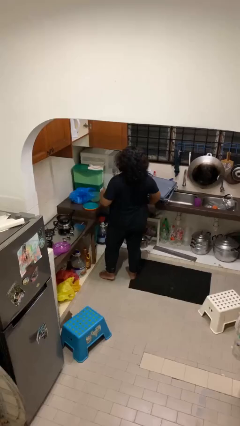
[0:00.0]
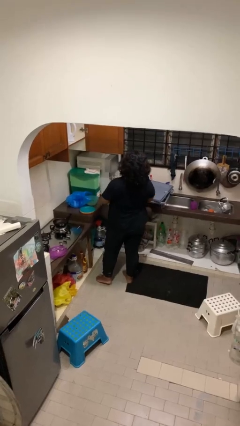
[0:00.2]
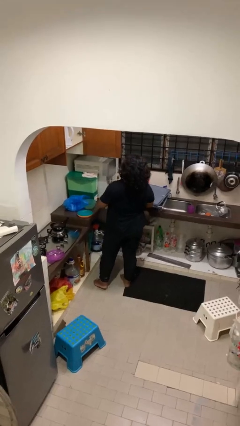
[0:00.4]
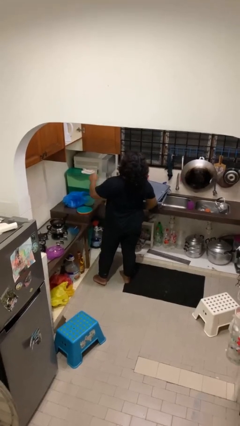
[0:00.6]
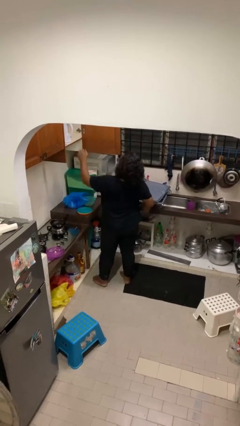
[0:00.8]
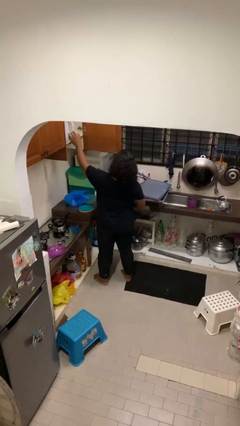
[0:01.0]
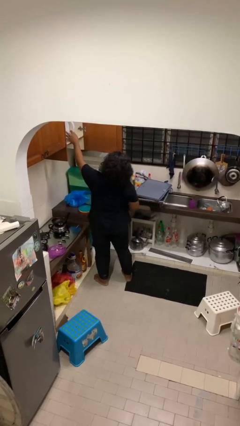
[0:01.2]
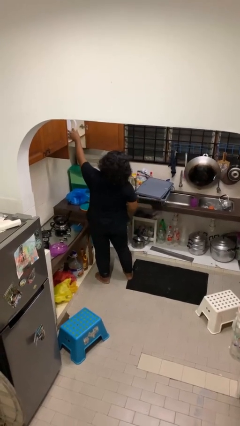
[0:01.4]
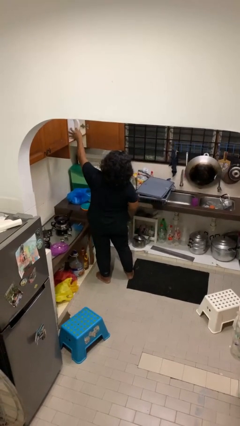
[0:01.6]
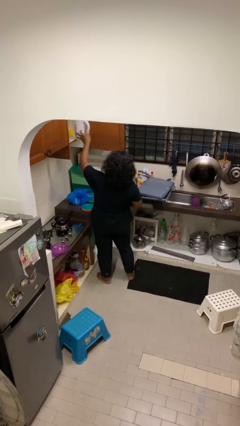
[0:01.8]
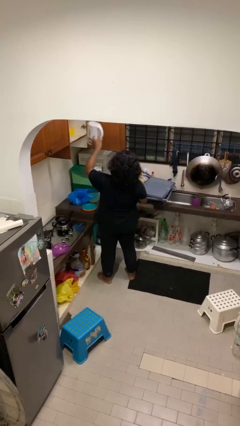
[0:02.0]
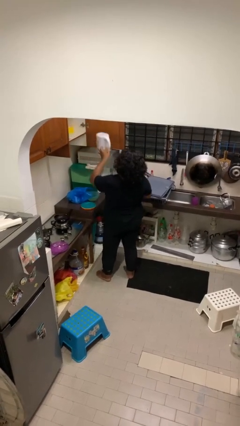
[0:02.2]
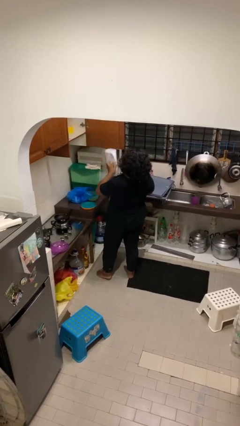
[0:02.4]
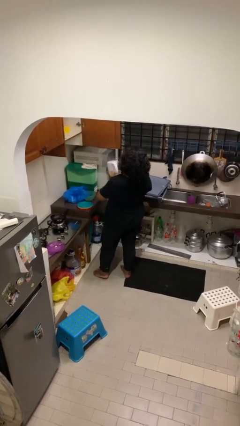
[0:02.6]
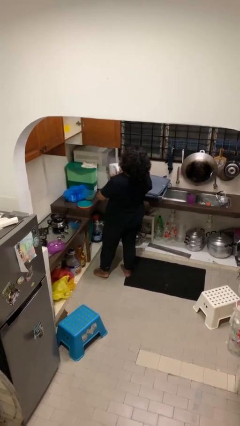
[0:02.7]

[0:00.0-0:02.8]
person takes object from cabinet

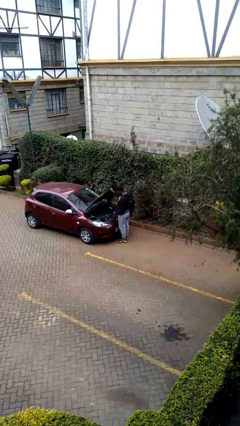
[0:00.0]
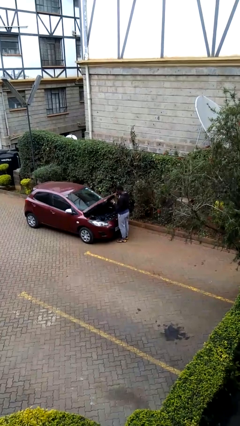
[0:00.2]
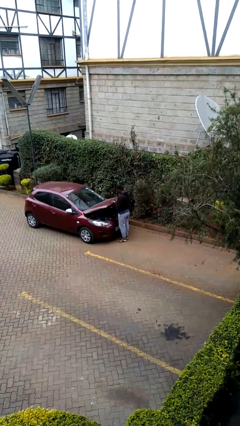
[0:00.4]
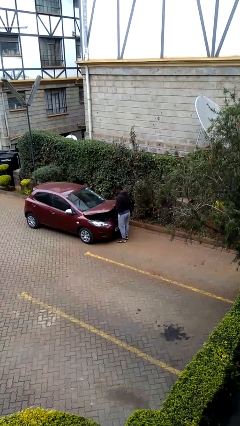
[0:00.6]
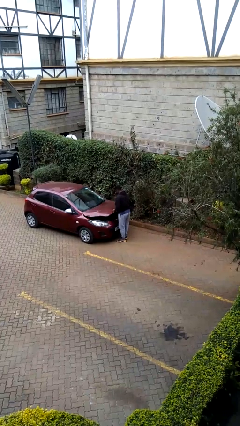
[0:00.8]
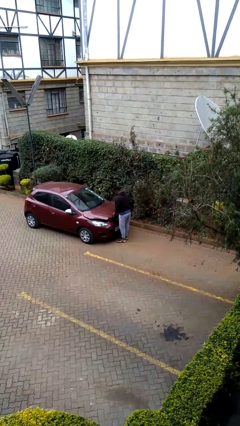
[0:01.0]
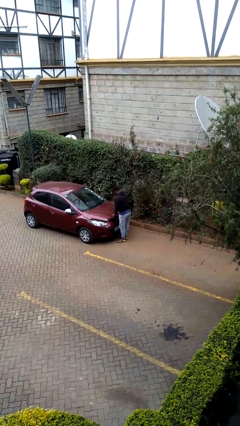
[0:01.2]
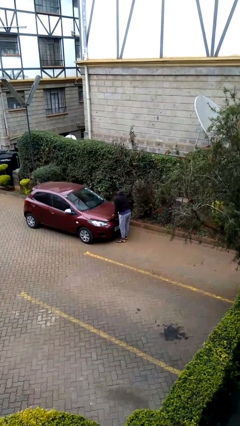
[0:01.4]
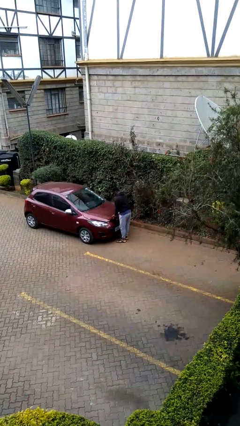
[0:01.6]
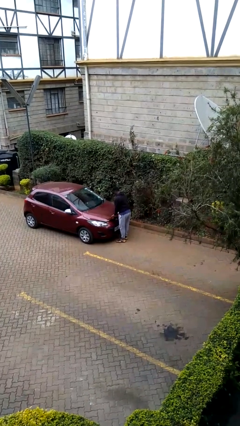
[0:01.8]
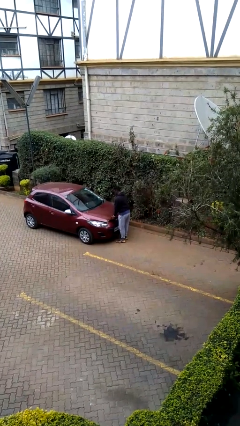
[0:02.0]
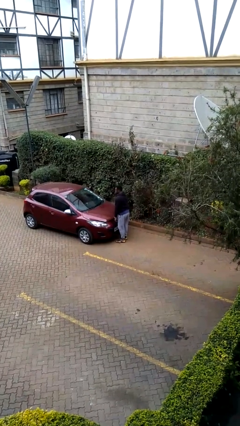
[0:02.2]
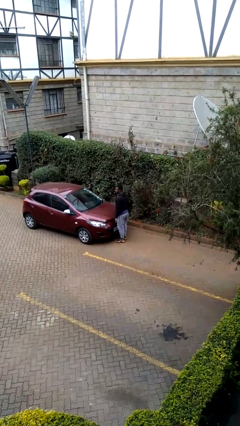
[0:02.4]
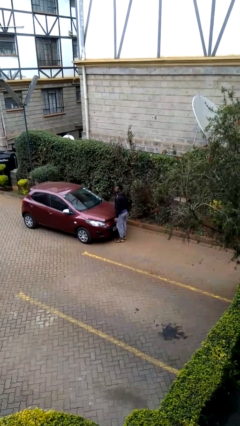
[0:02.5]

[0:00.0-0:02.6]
person closes car hood

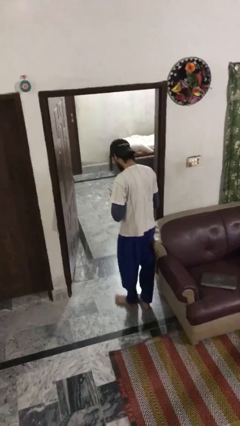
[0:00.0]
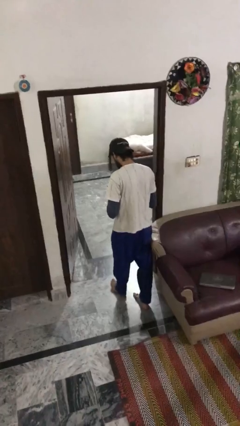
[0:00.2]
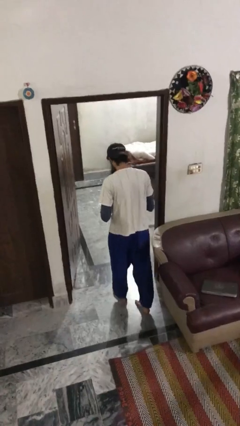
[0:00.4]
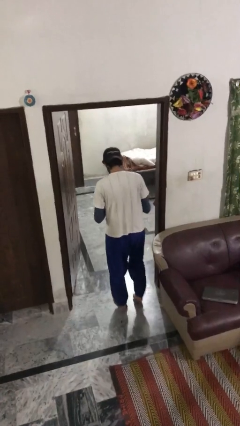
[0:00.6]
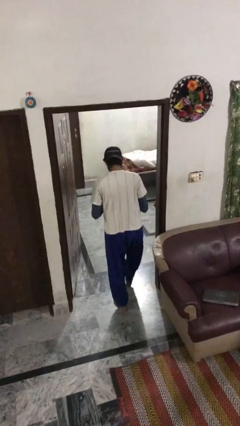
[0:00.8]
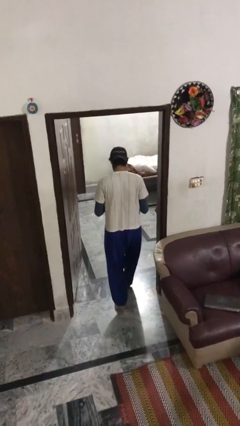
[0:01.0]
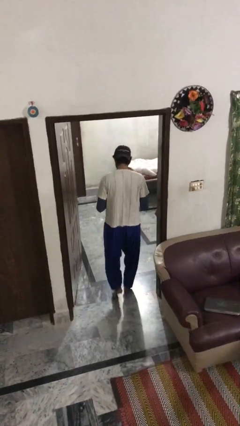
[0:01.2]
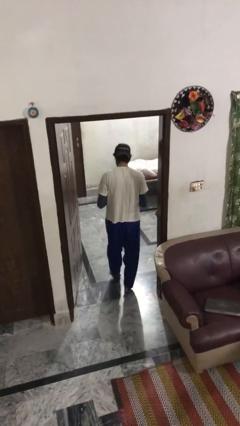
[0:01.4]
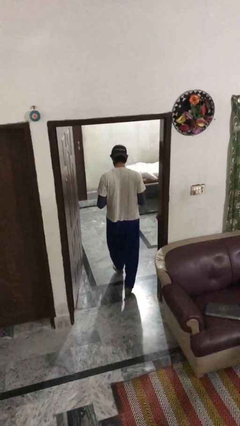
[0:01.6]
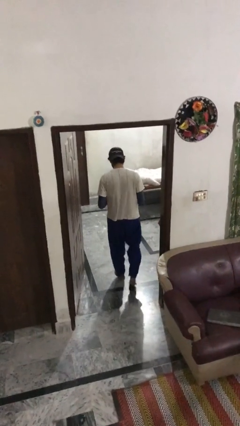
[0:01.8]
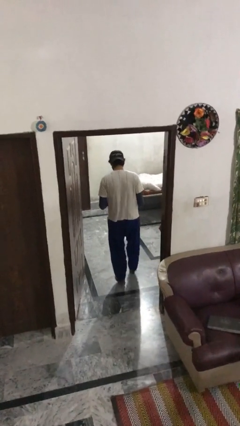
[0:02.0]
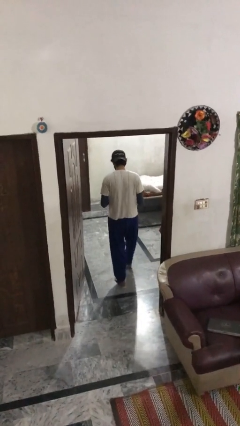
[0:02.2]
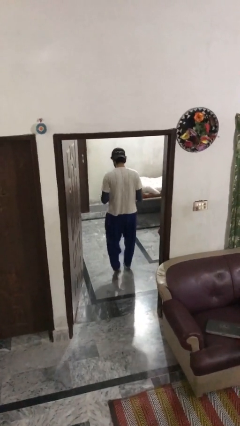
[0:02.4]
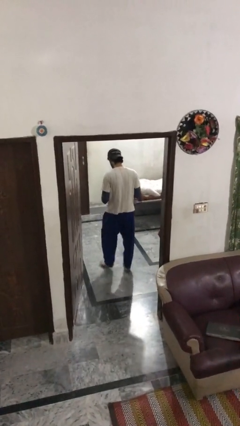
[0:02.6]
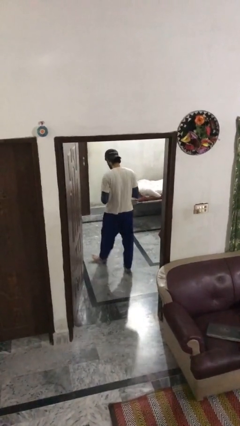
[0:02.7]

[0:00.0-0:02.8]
person exits scene through structure

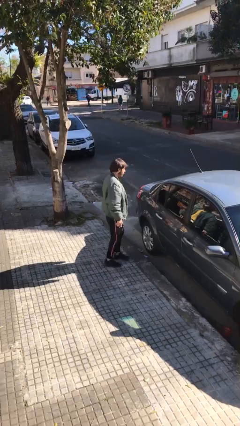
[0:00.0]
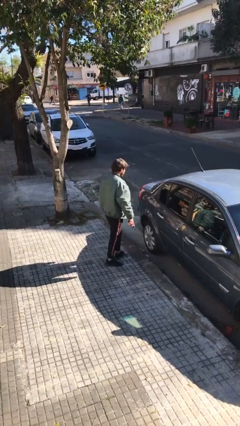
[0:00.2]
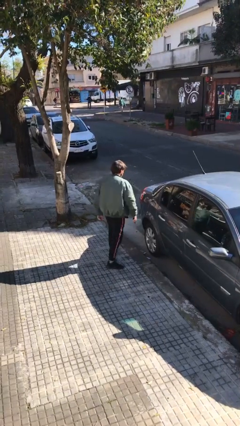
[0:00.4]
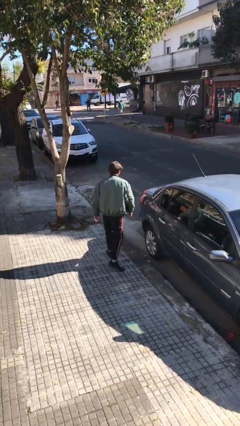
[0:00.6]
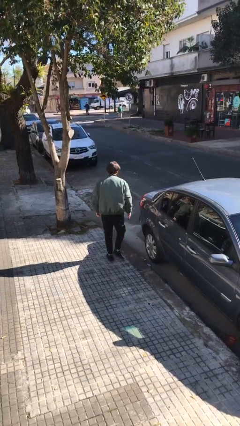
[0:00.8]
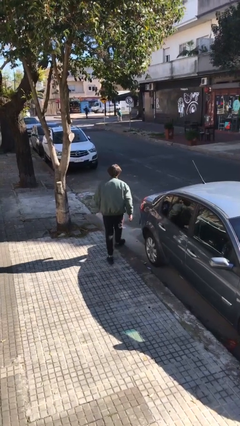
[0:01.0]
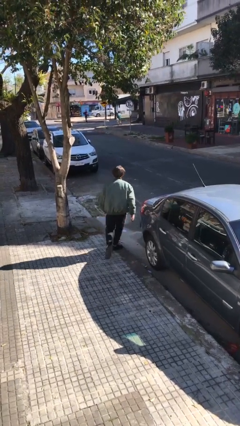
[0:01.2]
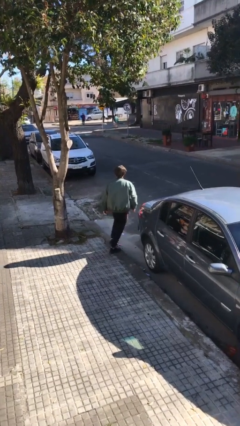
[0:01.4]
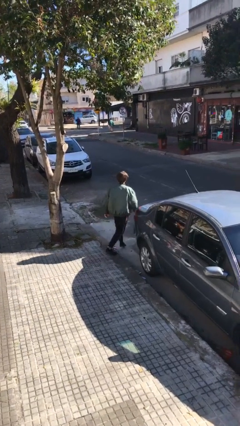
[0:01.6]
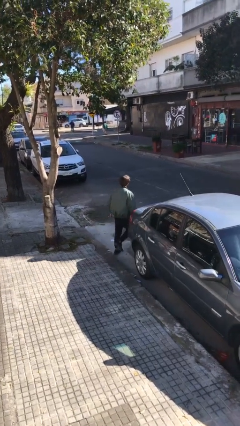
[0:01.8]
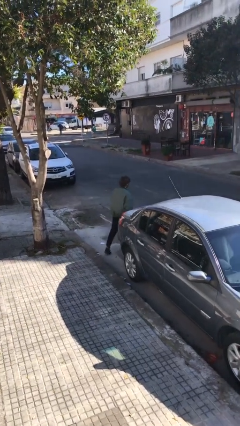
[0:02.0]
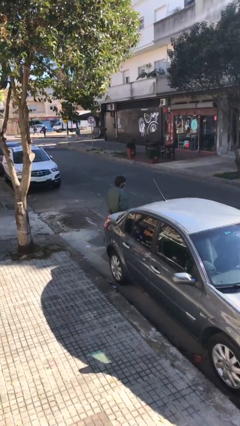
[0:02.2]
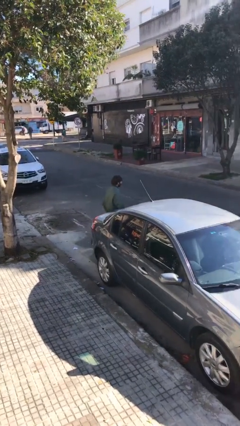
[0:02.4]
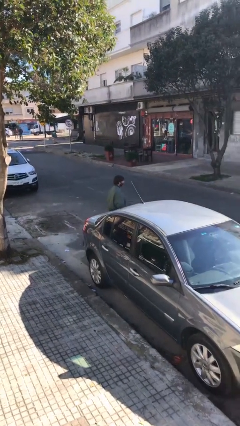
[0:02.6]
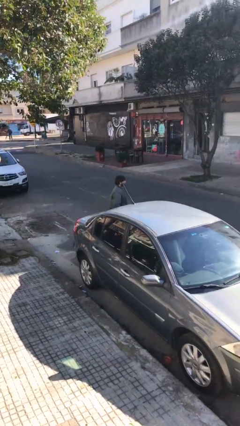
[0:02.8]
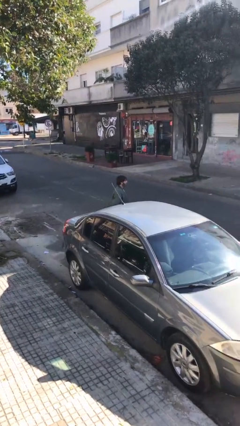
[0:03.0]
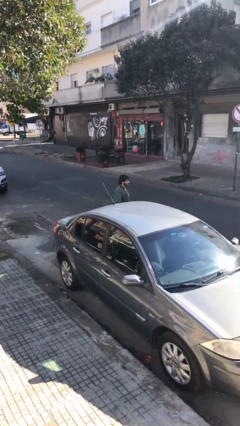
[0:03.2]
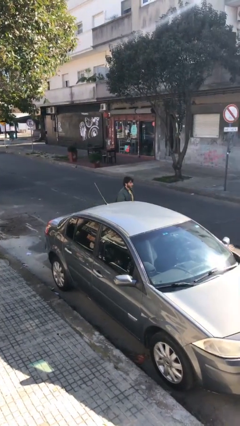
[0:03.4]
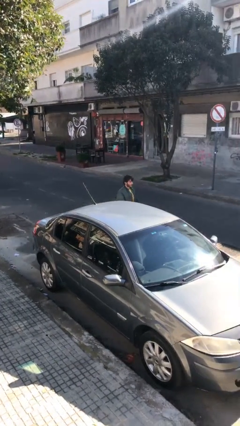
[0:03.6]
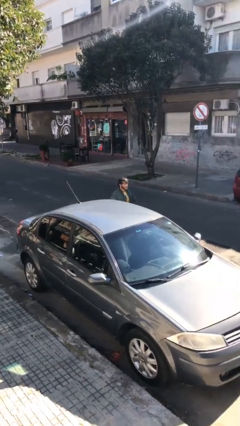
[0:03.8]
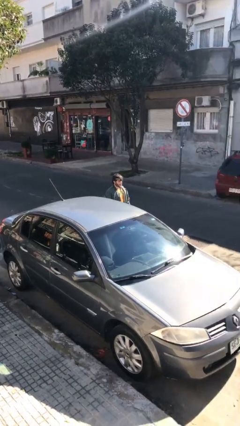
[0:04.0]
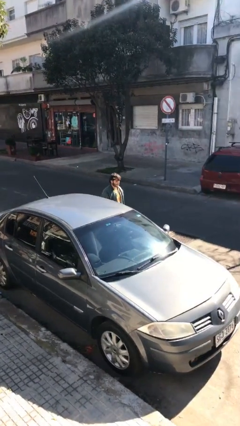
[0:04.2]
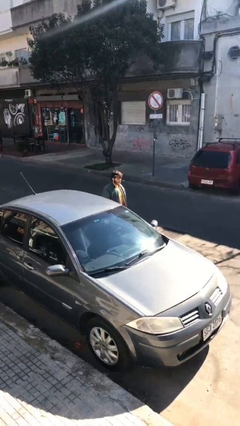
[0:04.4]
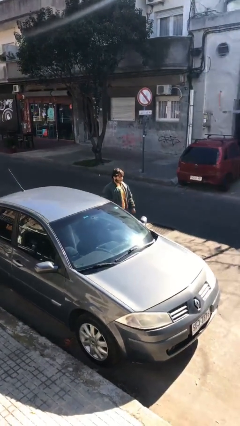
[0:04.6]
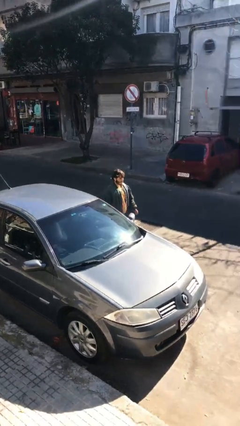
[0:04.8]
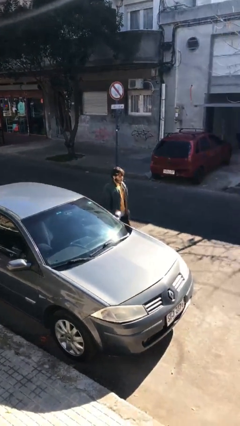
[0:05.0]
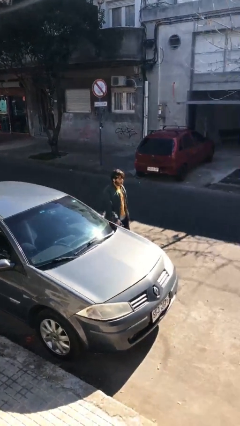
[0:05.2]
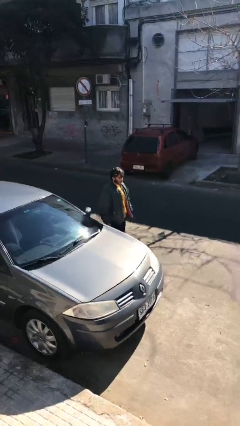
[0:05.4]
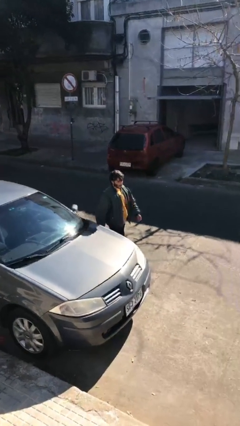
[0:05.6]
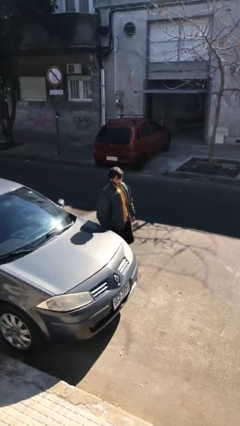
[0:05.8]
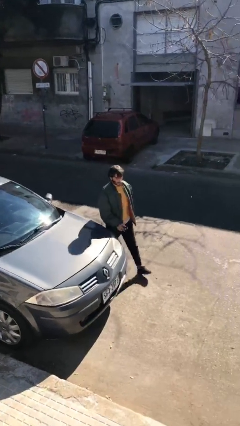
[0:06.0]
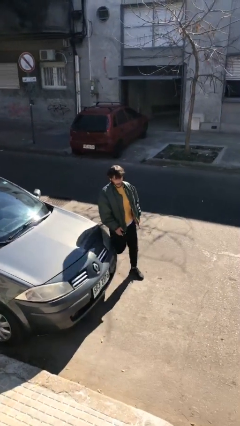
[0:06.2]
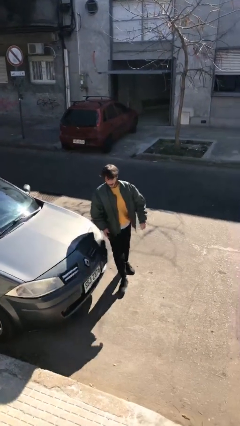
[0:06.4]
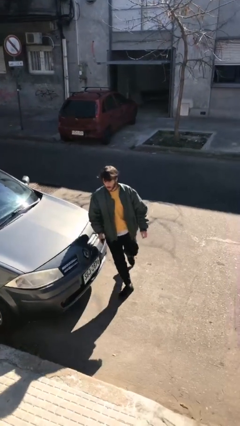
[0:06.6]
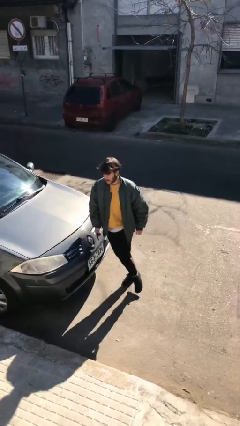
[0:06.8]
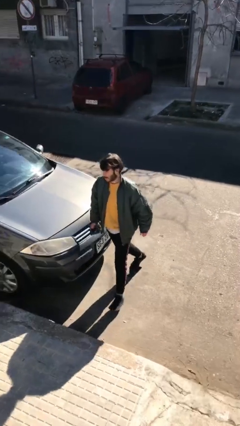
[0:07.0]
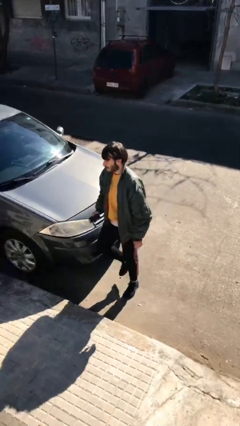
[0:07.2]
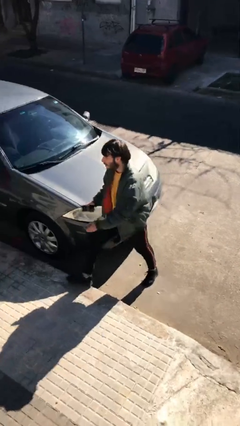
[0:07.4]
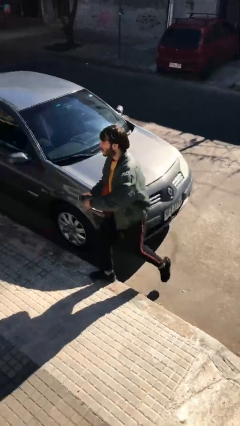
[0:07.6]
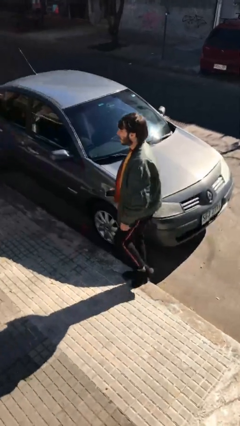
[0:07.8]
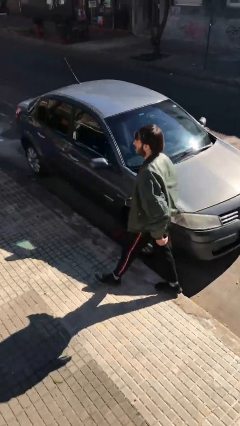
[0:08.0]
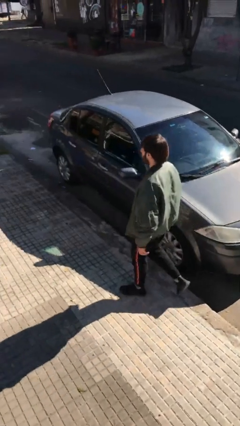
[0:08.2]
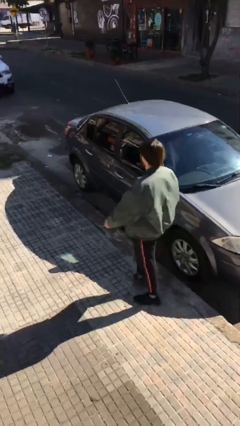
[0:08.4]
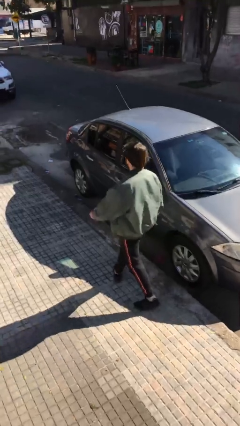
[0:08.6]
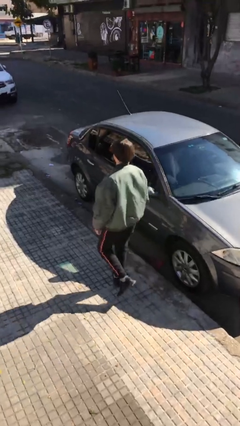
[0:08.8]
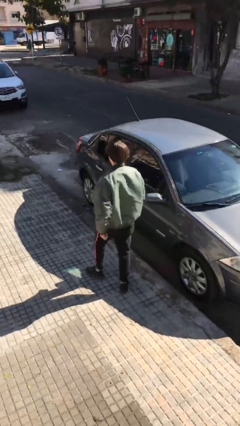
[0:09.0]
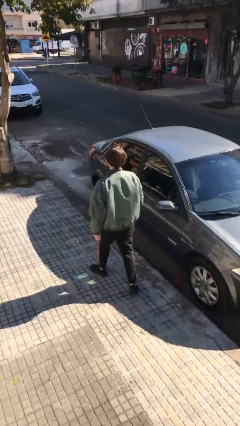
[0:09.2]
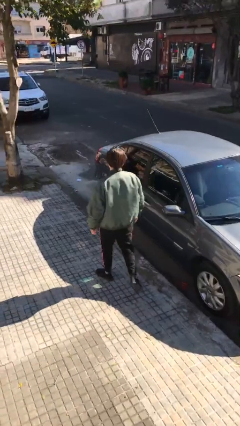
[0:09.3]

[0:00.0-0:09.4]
person walks around car

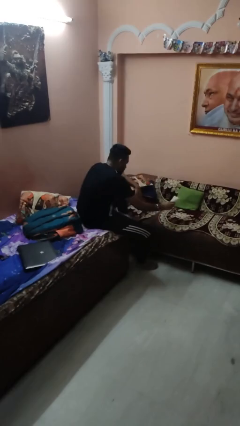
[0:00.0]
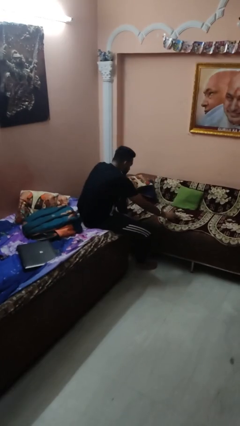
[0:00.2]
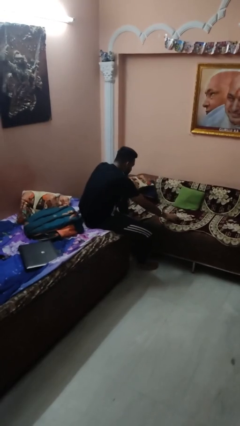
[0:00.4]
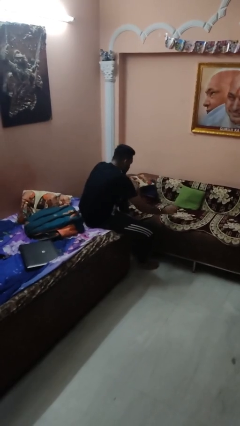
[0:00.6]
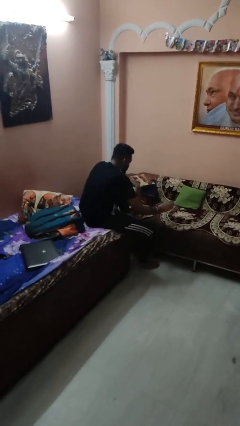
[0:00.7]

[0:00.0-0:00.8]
person puts down object on couch
